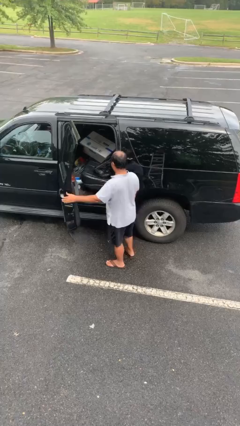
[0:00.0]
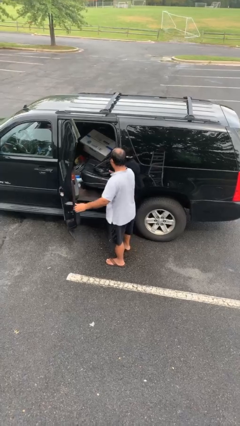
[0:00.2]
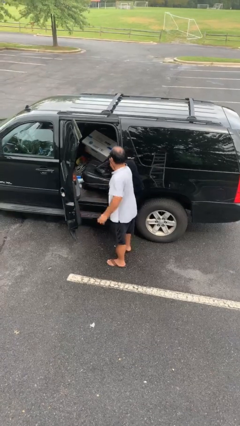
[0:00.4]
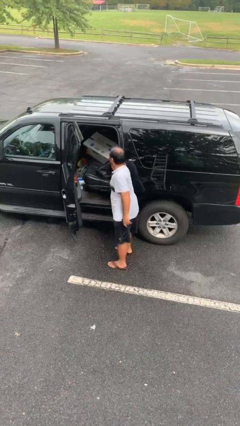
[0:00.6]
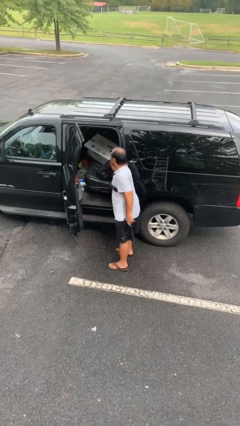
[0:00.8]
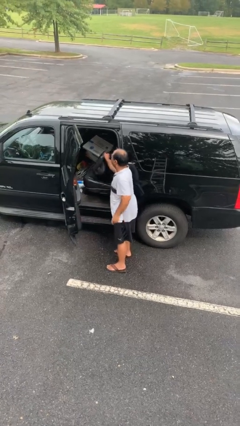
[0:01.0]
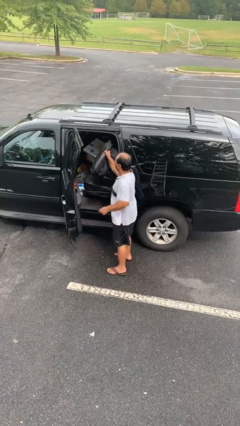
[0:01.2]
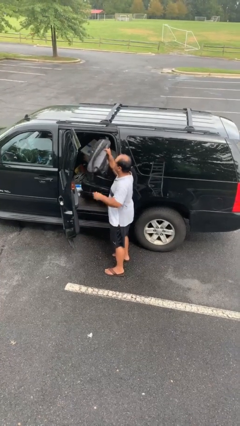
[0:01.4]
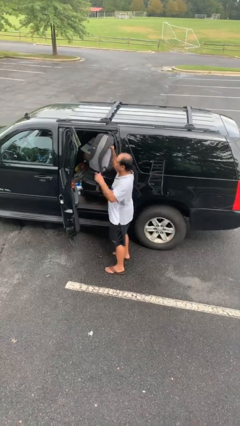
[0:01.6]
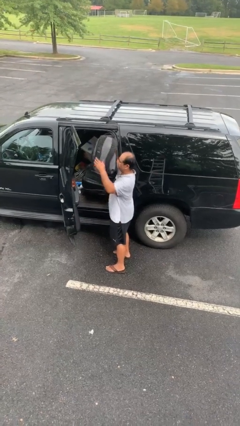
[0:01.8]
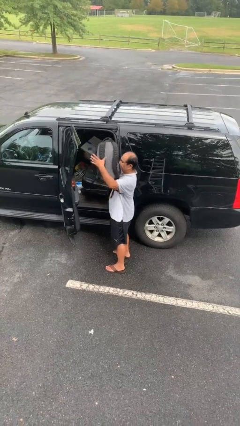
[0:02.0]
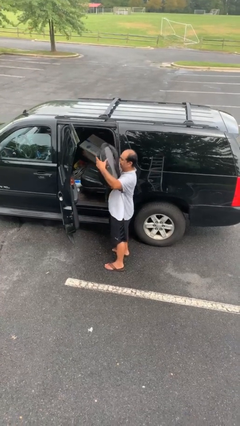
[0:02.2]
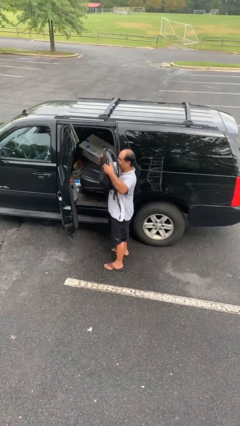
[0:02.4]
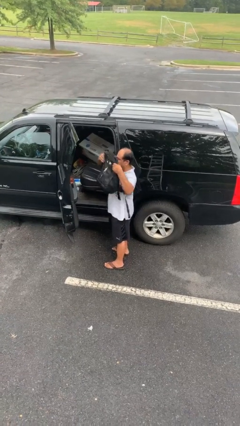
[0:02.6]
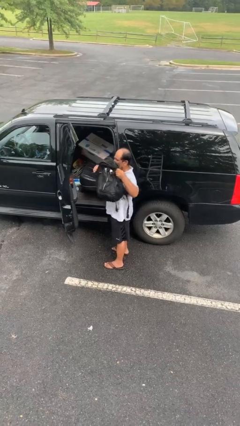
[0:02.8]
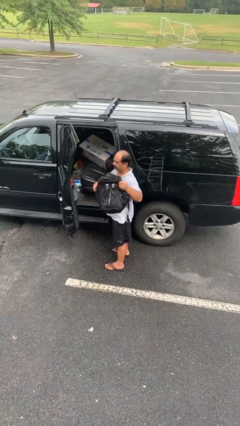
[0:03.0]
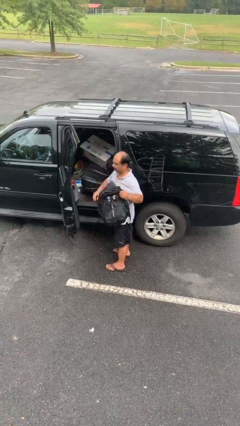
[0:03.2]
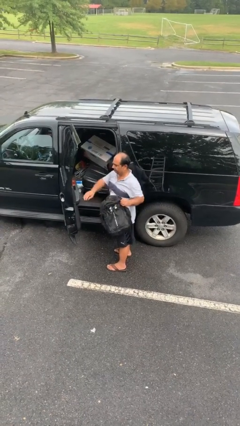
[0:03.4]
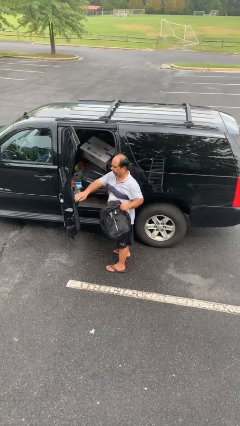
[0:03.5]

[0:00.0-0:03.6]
person unloads car

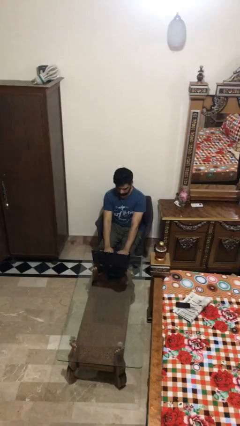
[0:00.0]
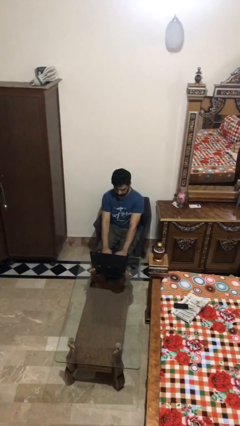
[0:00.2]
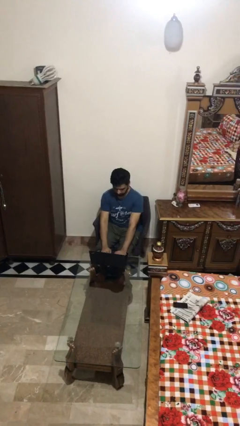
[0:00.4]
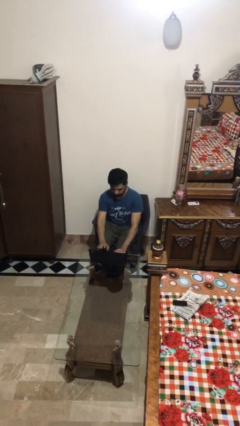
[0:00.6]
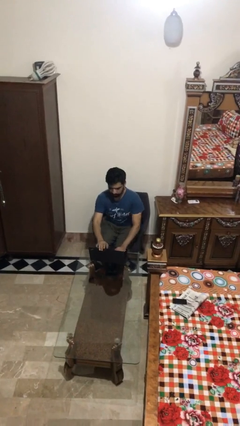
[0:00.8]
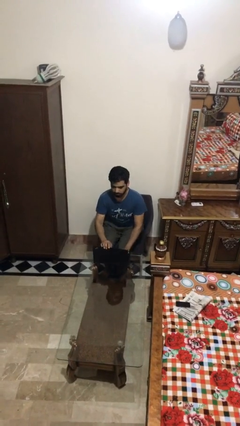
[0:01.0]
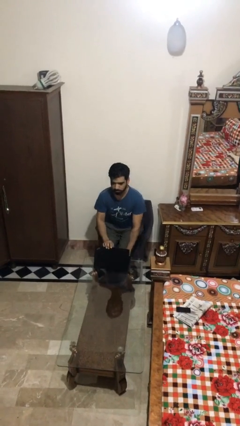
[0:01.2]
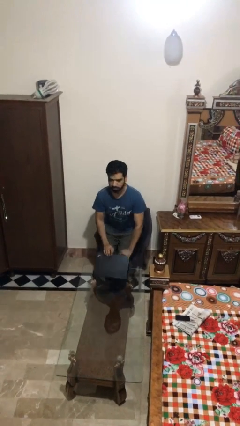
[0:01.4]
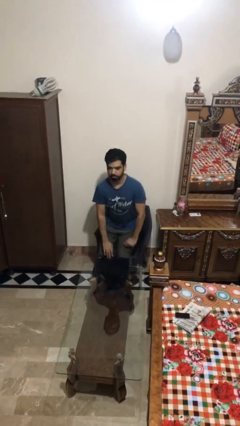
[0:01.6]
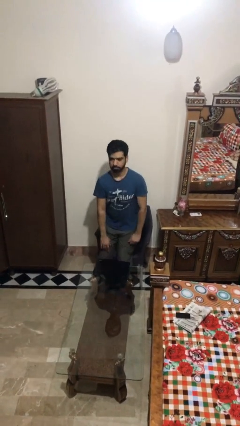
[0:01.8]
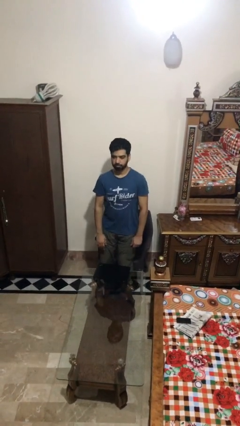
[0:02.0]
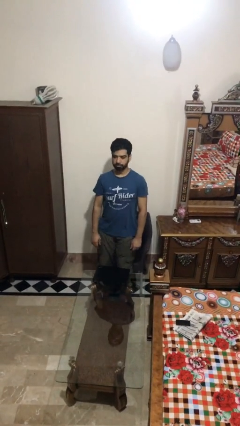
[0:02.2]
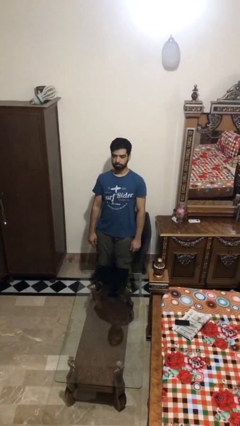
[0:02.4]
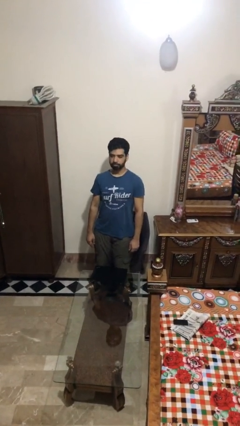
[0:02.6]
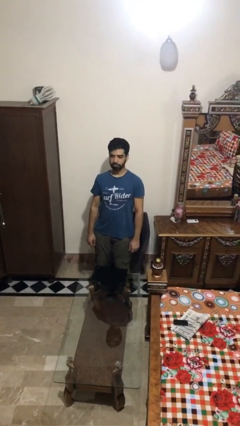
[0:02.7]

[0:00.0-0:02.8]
person stands up

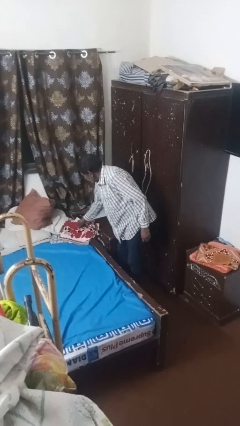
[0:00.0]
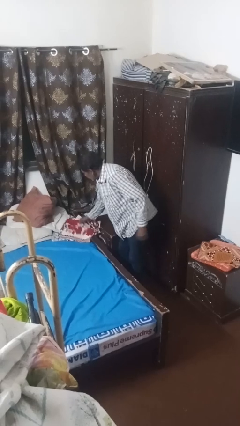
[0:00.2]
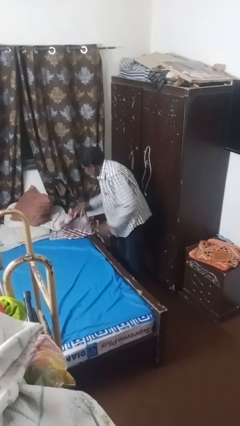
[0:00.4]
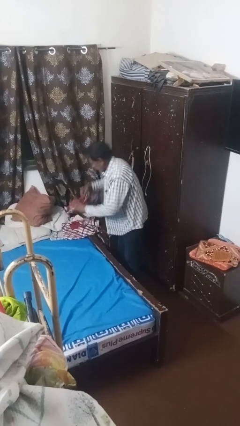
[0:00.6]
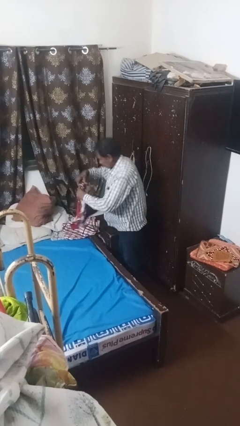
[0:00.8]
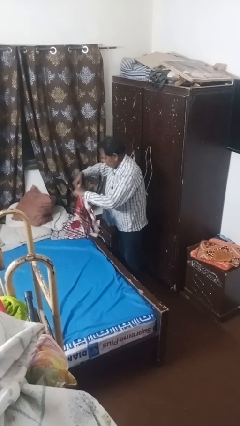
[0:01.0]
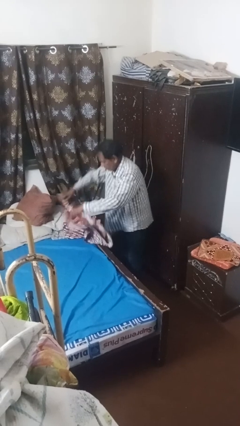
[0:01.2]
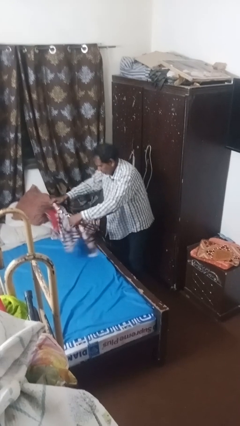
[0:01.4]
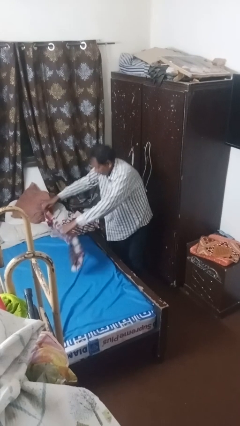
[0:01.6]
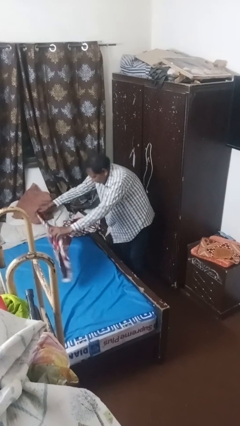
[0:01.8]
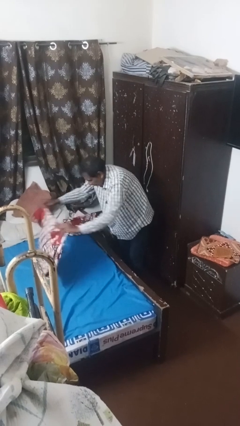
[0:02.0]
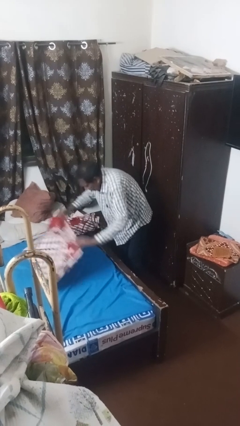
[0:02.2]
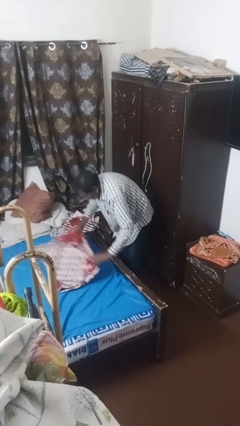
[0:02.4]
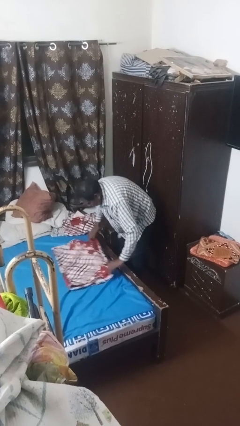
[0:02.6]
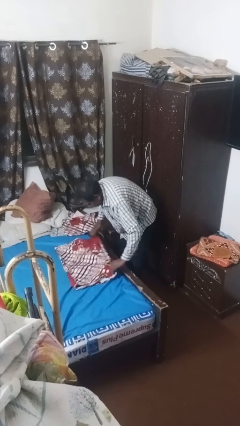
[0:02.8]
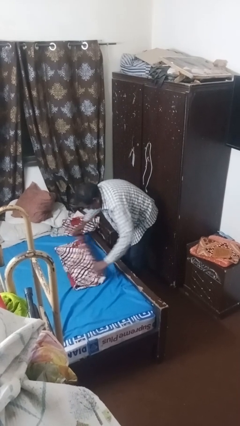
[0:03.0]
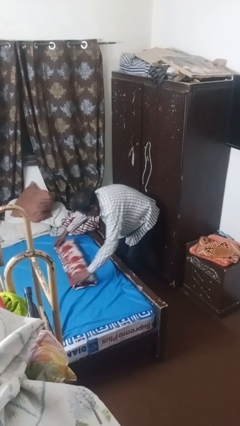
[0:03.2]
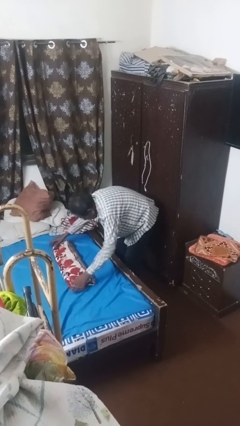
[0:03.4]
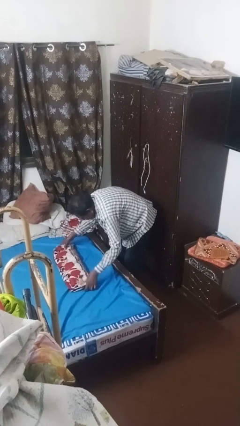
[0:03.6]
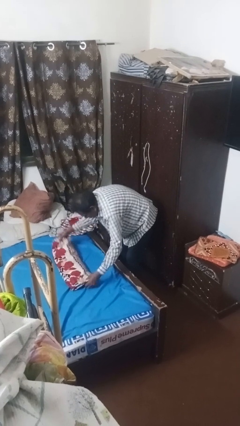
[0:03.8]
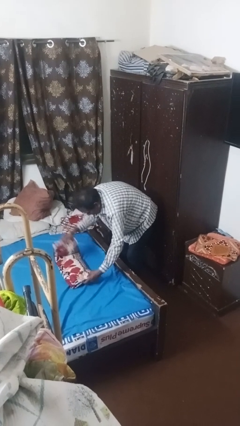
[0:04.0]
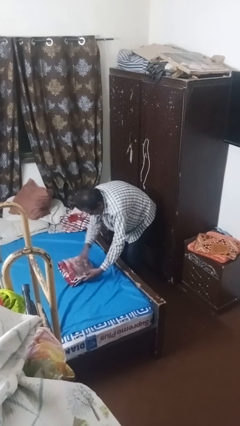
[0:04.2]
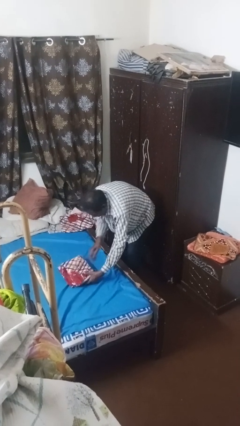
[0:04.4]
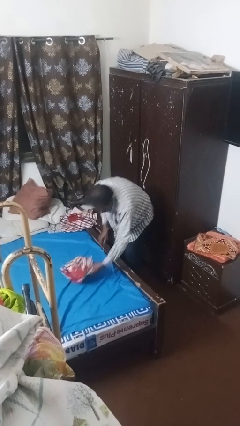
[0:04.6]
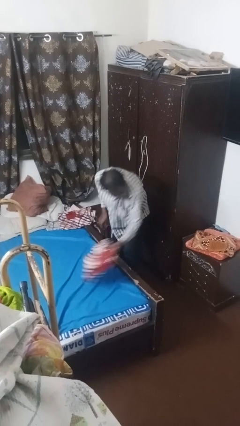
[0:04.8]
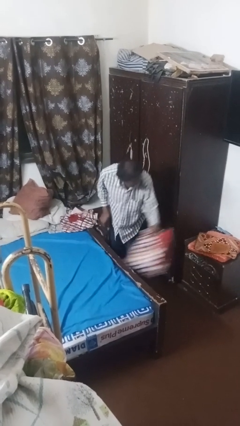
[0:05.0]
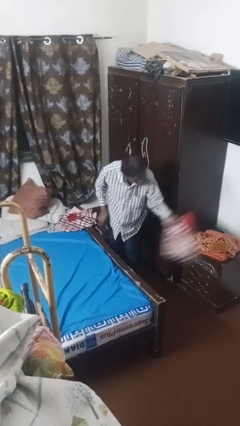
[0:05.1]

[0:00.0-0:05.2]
person folds towel

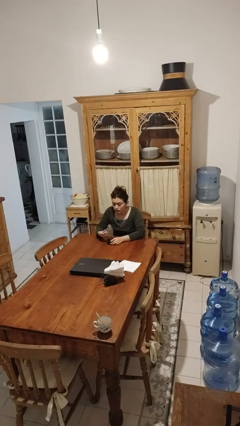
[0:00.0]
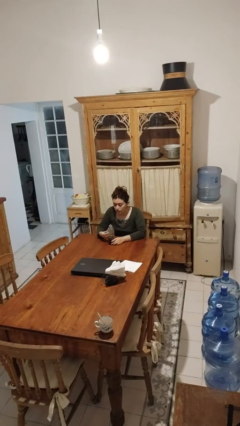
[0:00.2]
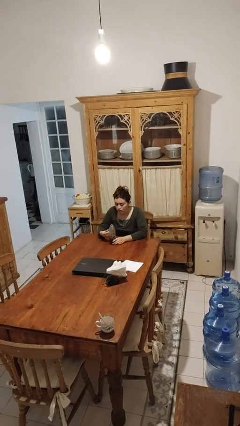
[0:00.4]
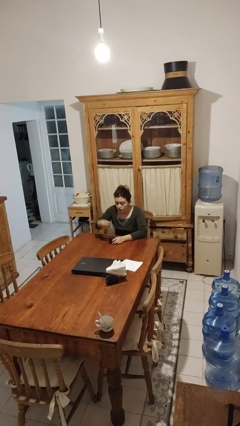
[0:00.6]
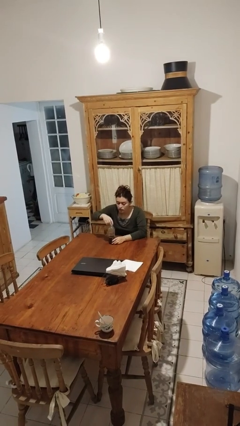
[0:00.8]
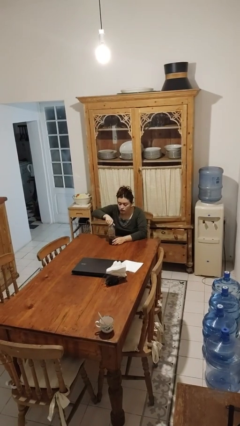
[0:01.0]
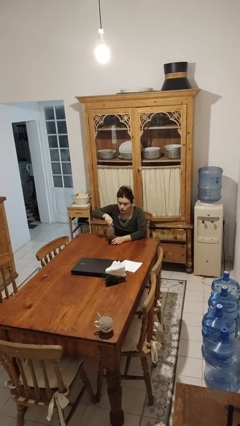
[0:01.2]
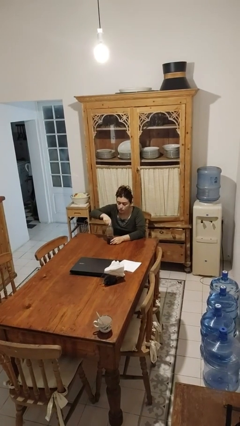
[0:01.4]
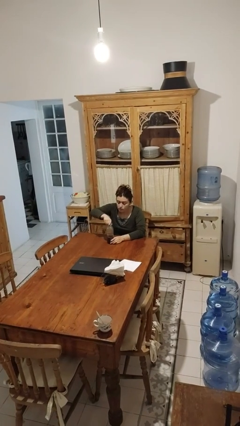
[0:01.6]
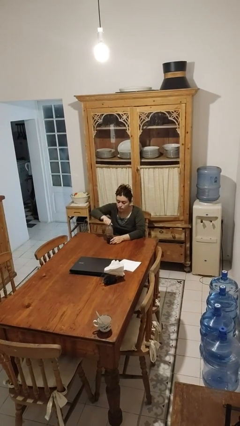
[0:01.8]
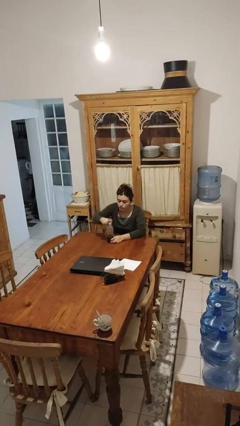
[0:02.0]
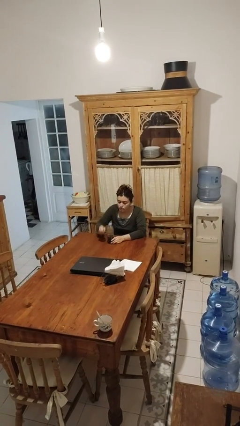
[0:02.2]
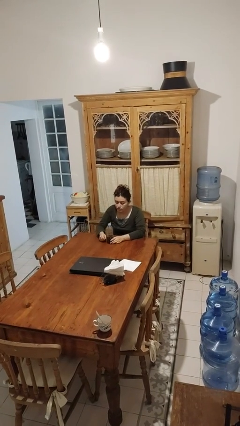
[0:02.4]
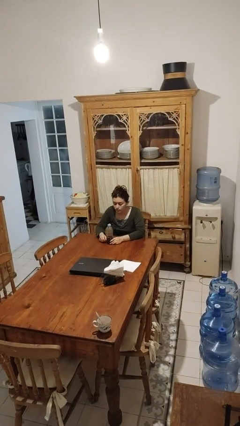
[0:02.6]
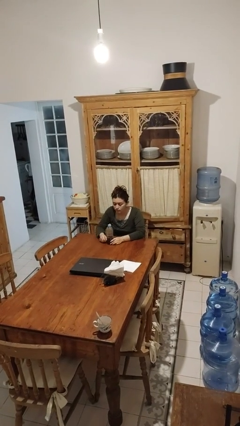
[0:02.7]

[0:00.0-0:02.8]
person screws lid to bottle

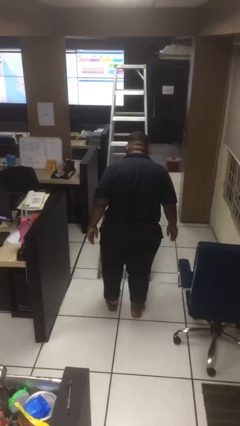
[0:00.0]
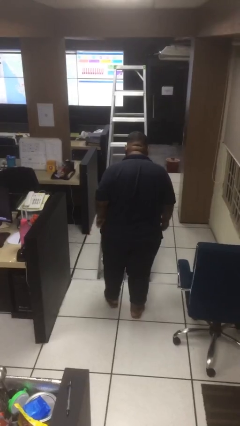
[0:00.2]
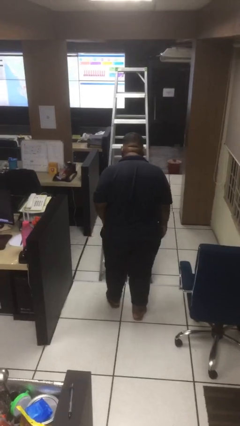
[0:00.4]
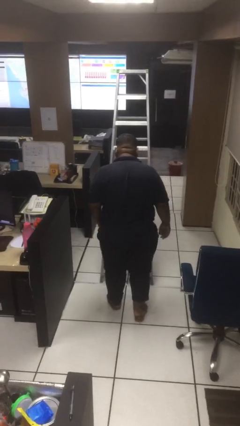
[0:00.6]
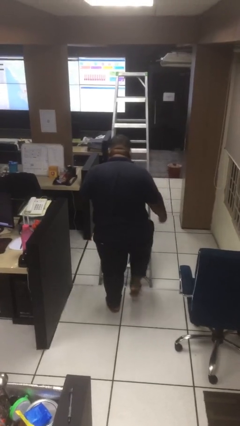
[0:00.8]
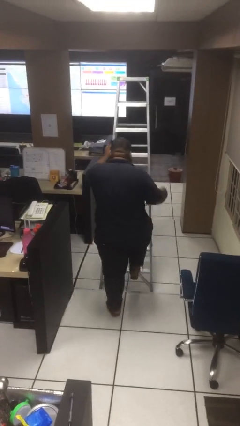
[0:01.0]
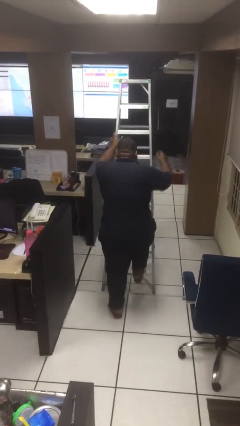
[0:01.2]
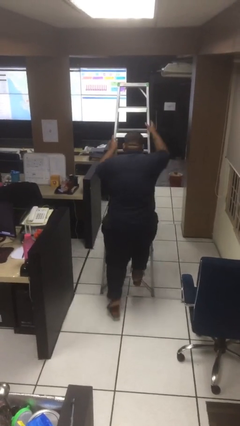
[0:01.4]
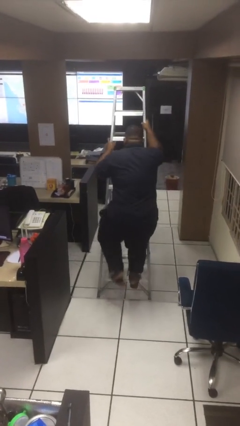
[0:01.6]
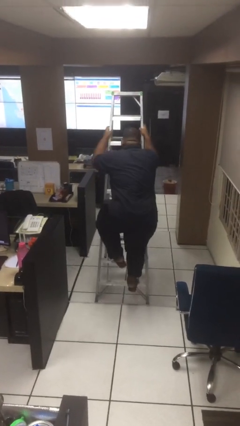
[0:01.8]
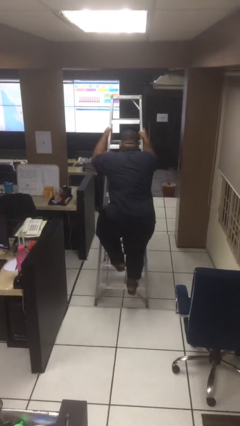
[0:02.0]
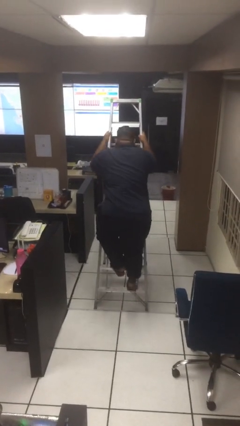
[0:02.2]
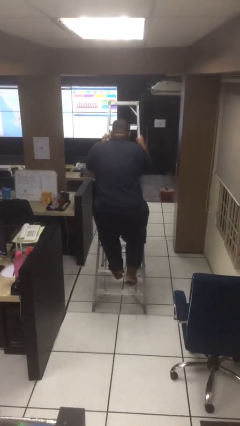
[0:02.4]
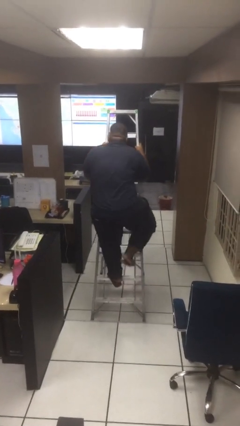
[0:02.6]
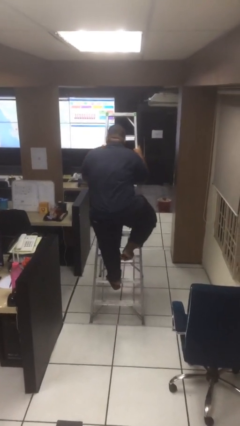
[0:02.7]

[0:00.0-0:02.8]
person climbs up ladder

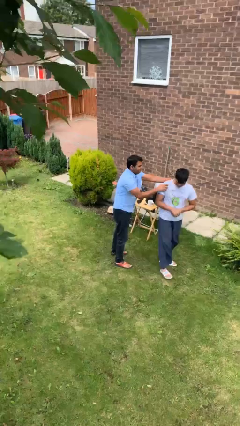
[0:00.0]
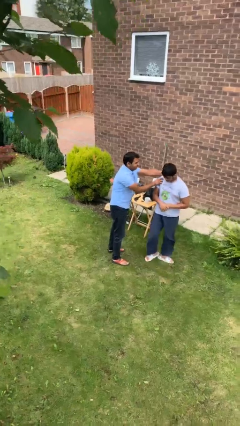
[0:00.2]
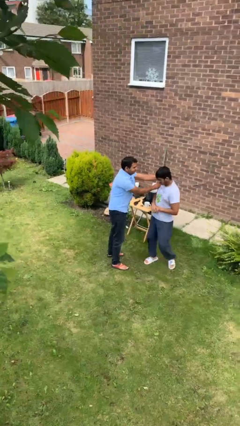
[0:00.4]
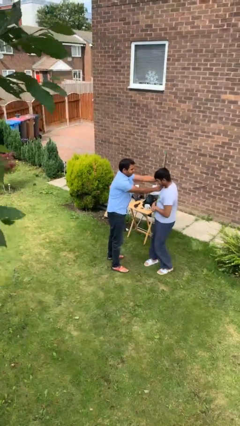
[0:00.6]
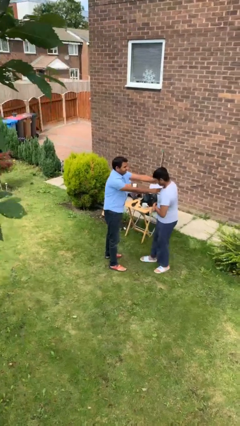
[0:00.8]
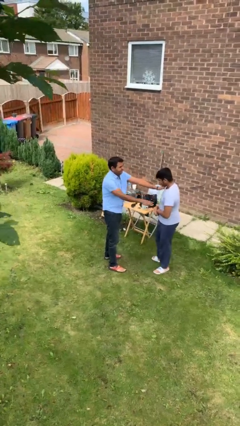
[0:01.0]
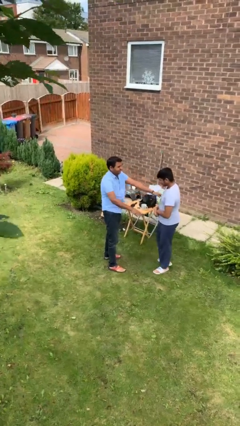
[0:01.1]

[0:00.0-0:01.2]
person spins person around
